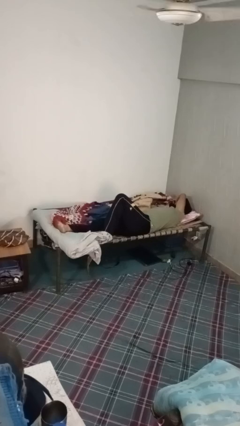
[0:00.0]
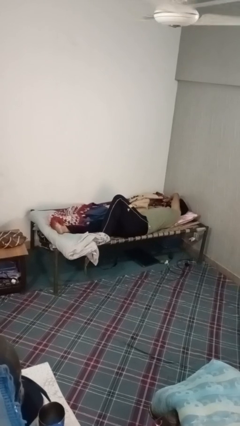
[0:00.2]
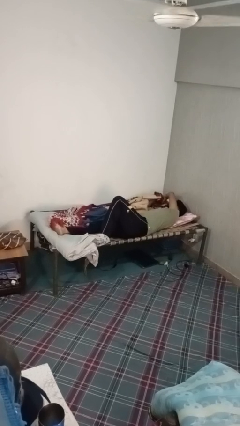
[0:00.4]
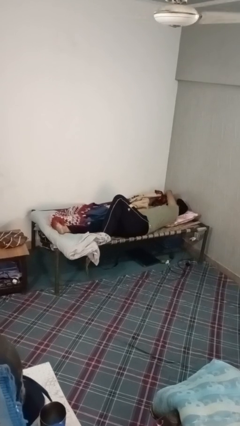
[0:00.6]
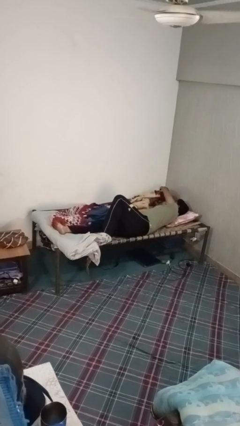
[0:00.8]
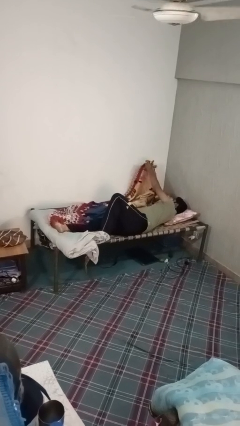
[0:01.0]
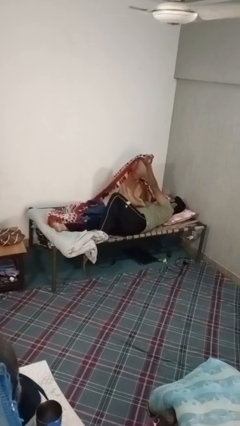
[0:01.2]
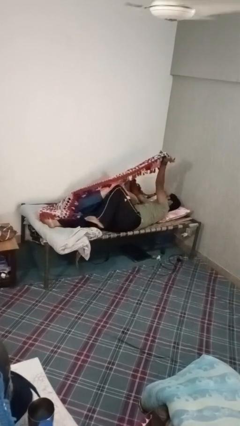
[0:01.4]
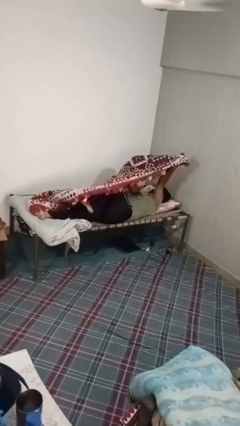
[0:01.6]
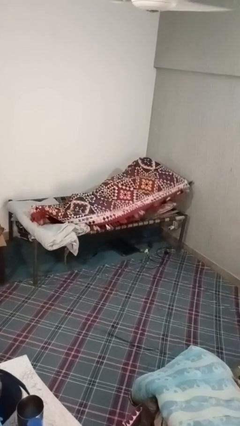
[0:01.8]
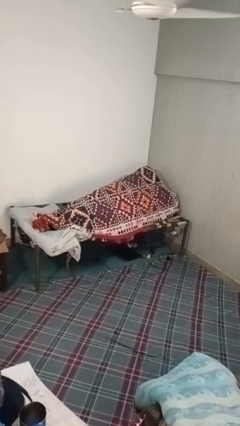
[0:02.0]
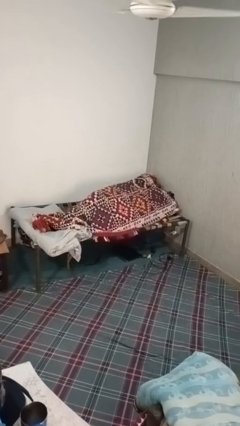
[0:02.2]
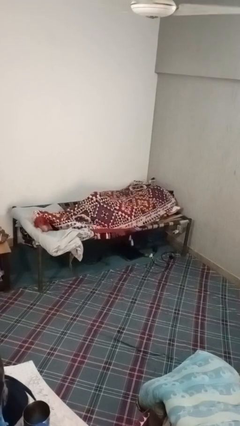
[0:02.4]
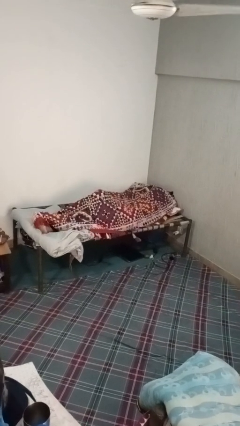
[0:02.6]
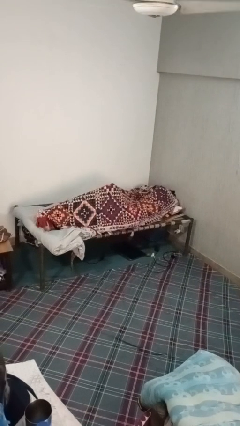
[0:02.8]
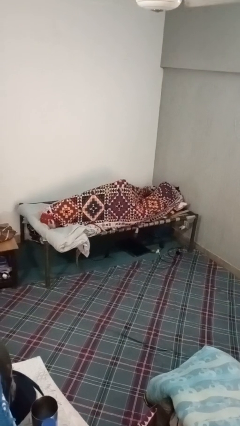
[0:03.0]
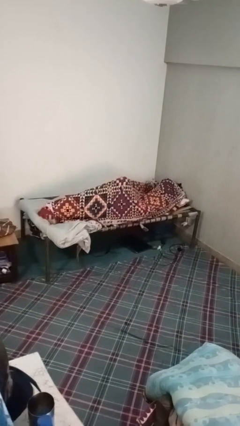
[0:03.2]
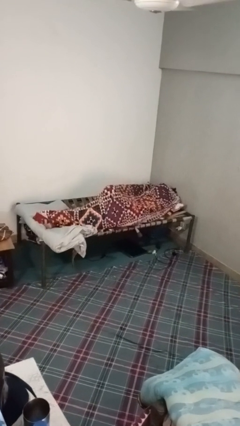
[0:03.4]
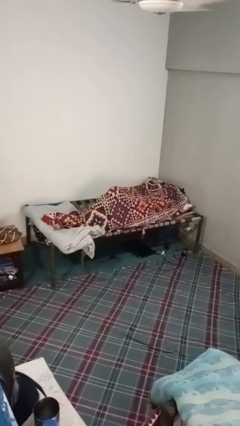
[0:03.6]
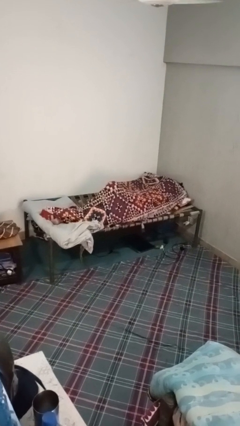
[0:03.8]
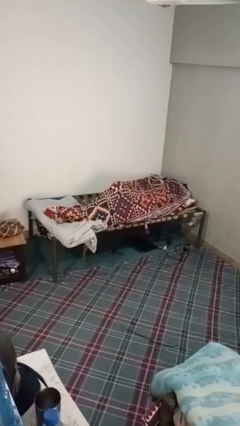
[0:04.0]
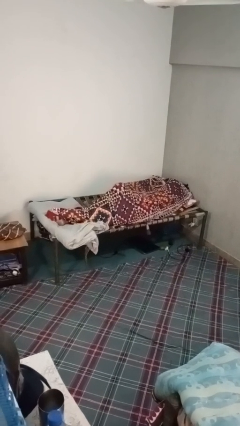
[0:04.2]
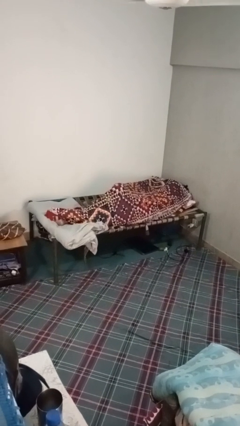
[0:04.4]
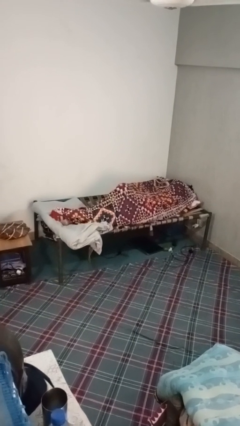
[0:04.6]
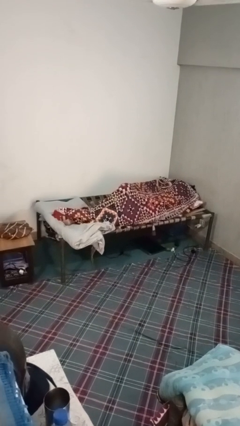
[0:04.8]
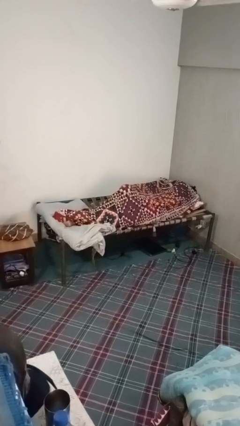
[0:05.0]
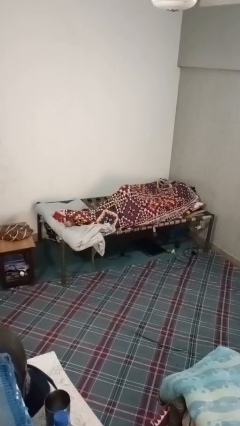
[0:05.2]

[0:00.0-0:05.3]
person covers with blanket

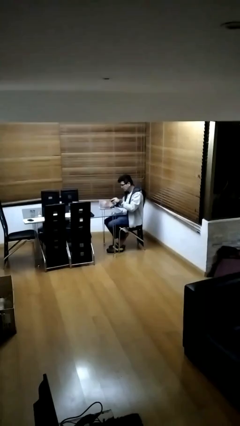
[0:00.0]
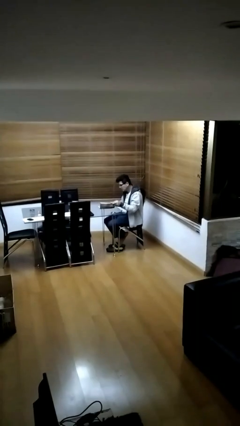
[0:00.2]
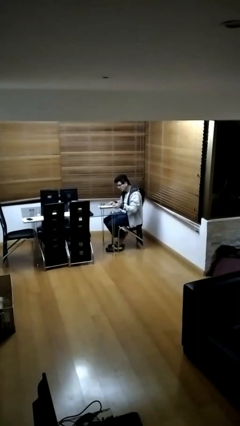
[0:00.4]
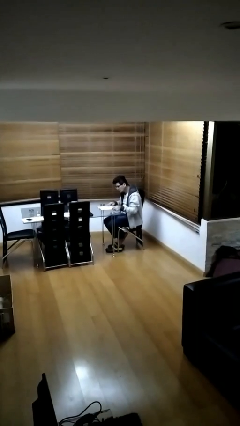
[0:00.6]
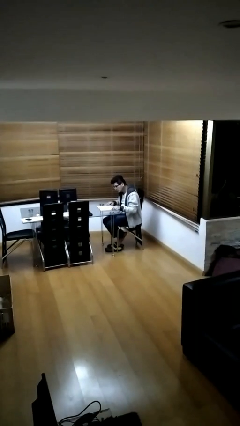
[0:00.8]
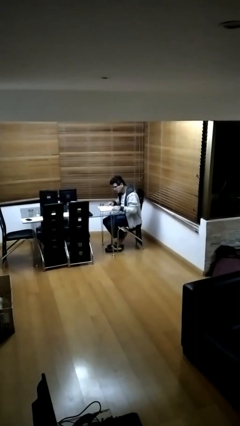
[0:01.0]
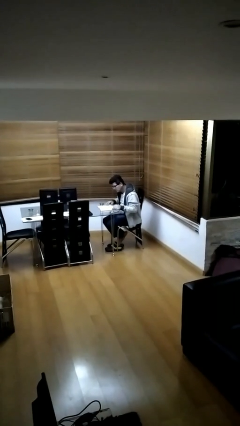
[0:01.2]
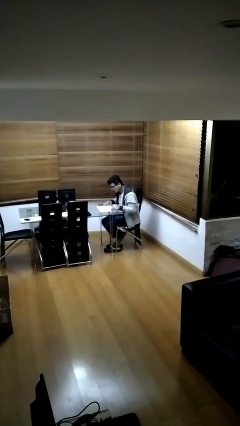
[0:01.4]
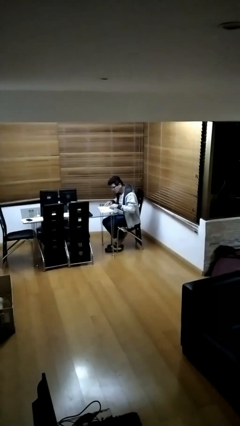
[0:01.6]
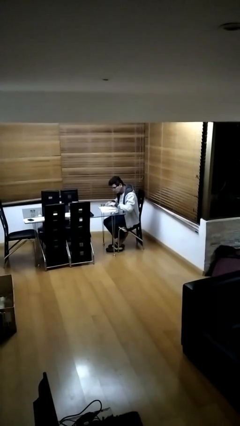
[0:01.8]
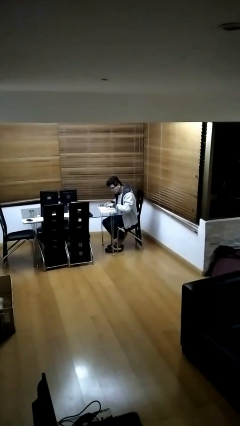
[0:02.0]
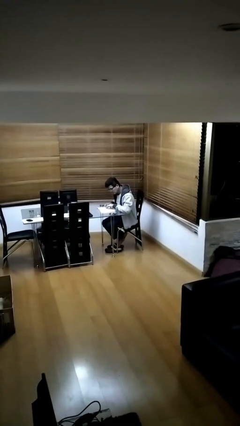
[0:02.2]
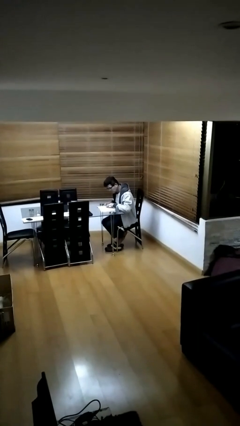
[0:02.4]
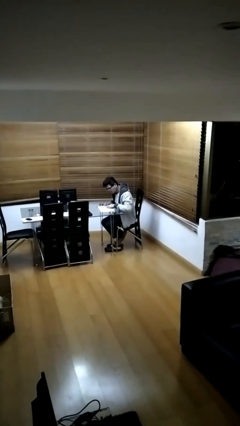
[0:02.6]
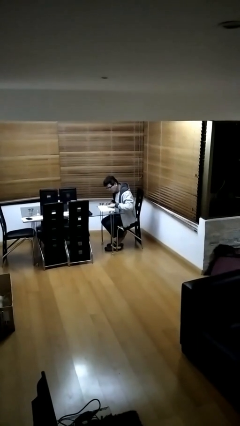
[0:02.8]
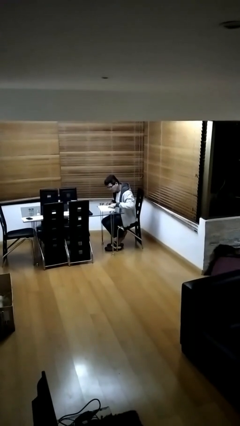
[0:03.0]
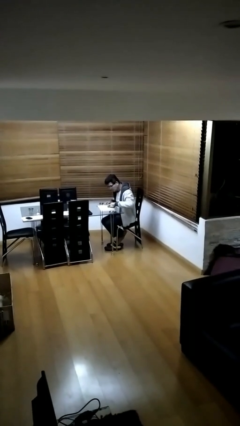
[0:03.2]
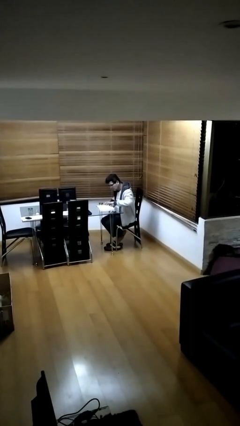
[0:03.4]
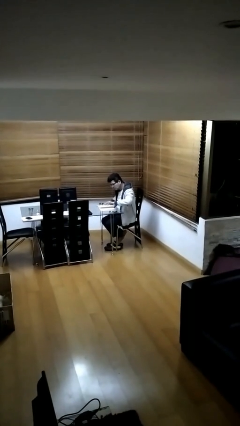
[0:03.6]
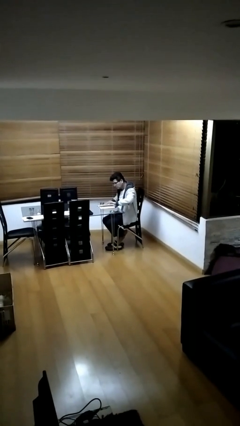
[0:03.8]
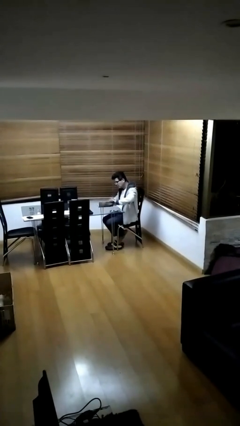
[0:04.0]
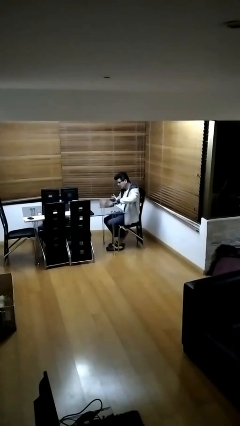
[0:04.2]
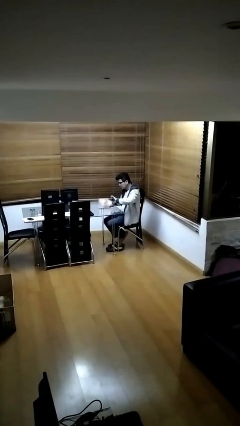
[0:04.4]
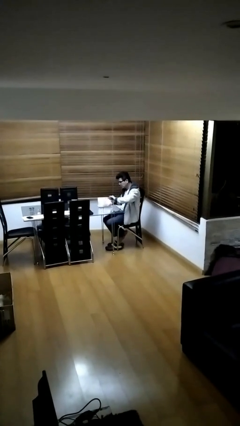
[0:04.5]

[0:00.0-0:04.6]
person reads document

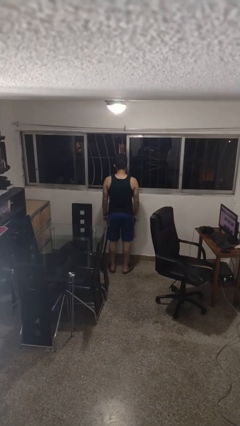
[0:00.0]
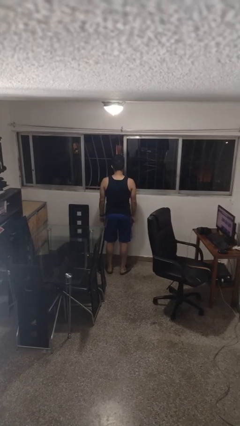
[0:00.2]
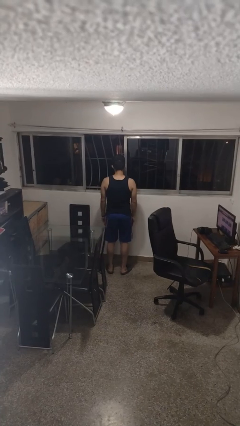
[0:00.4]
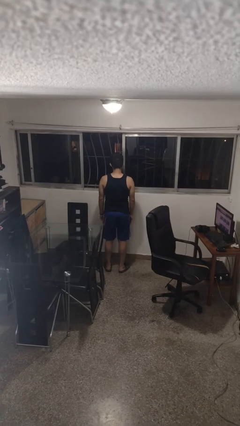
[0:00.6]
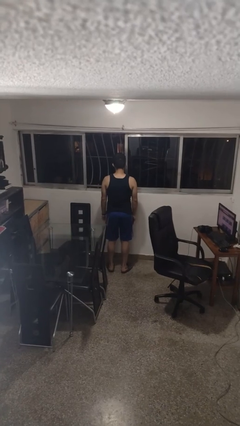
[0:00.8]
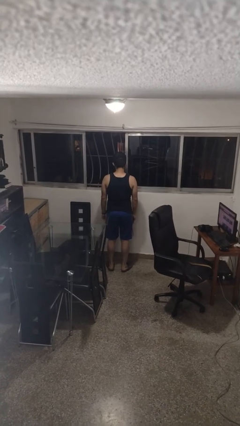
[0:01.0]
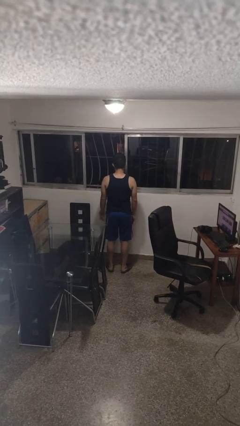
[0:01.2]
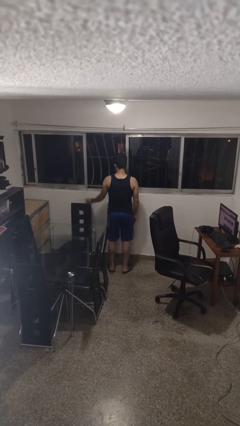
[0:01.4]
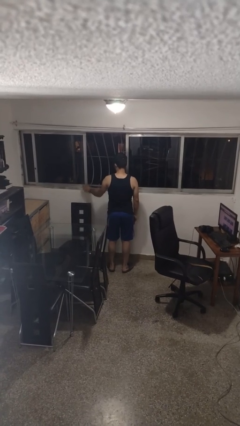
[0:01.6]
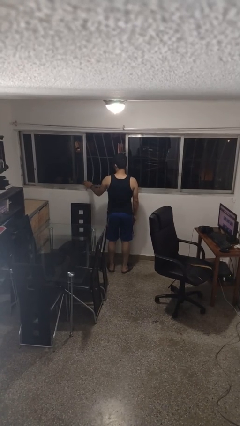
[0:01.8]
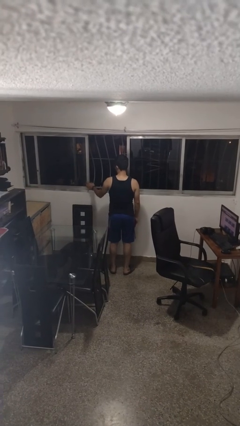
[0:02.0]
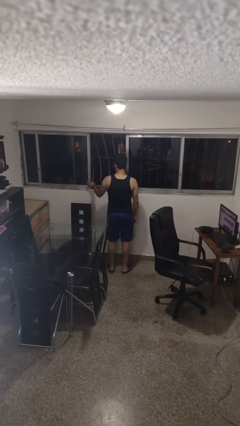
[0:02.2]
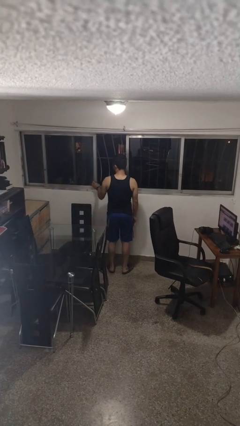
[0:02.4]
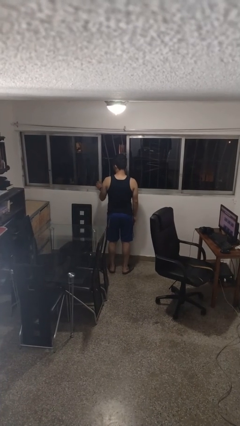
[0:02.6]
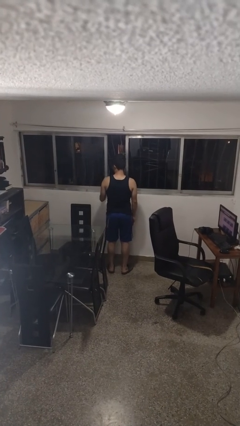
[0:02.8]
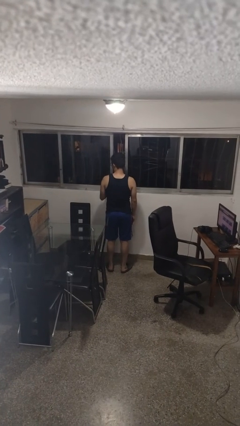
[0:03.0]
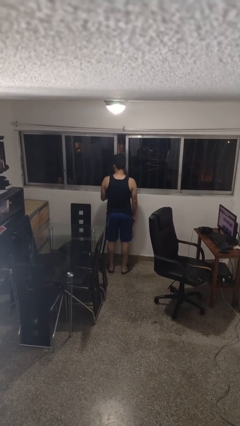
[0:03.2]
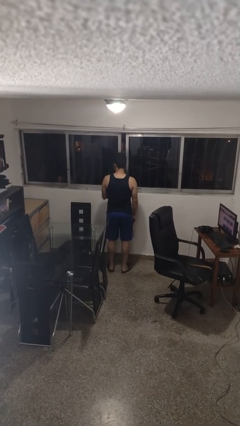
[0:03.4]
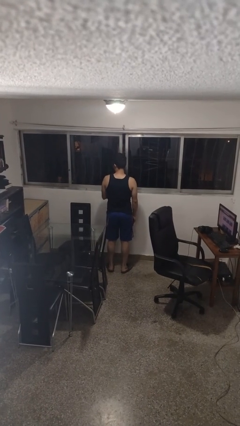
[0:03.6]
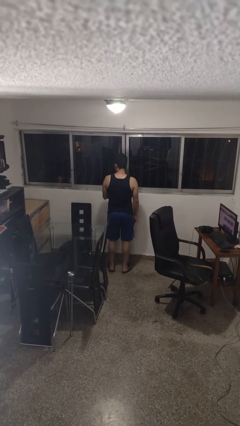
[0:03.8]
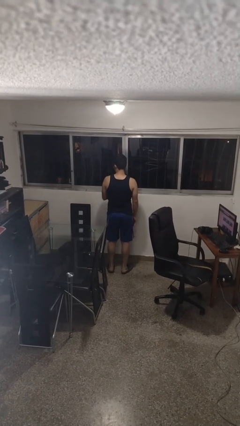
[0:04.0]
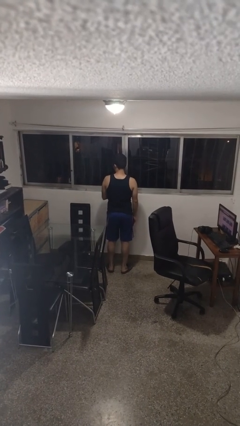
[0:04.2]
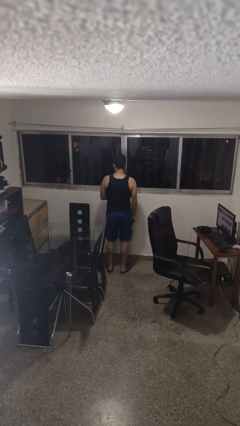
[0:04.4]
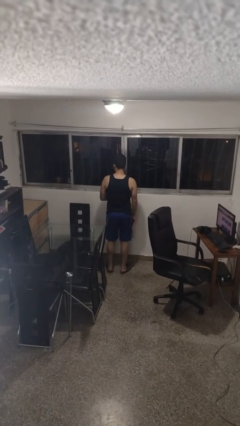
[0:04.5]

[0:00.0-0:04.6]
person closes home window

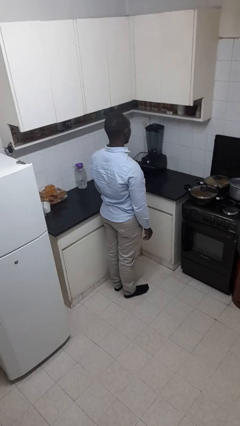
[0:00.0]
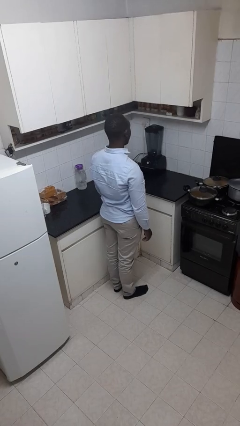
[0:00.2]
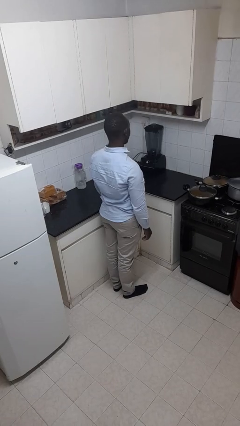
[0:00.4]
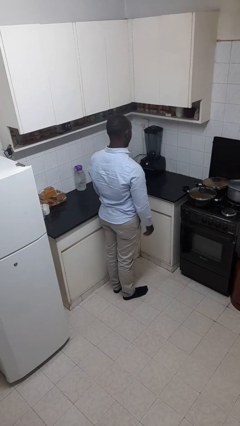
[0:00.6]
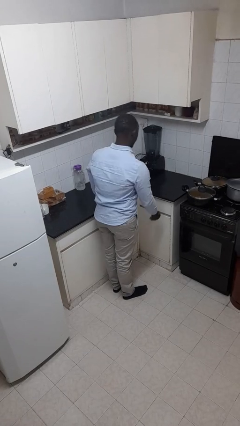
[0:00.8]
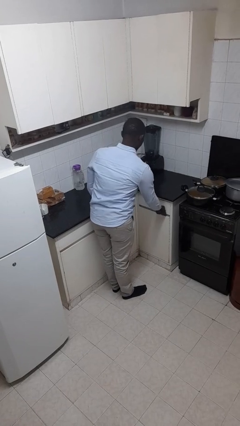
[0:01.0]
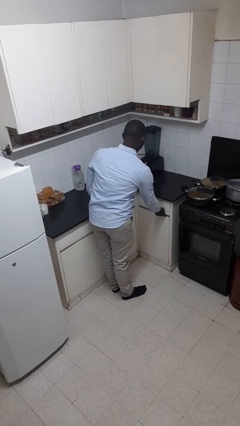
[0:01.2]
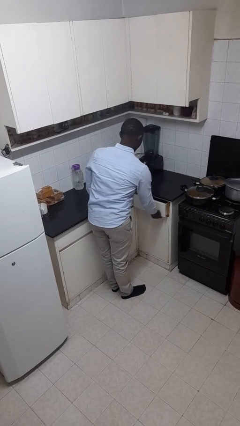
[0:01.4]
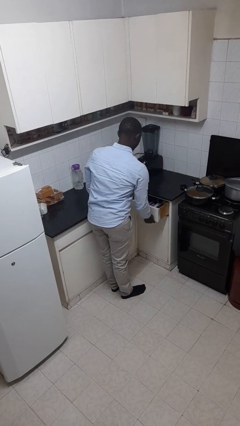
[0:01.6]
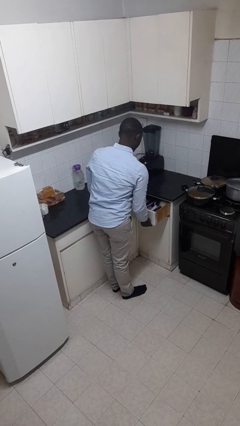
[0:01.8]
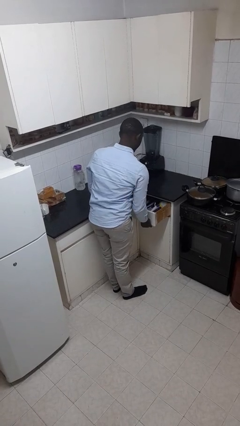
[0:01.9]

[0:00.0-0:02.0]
person opens kitchen drawer

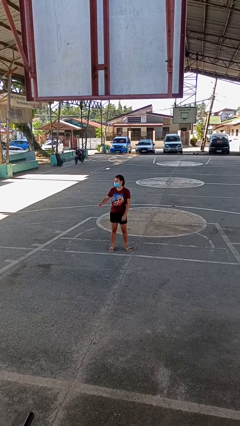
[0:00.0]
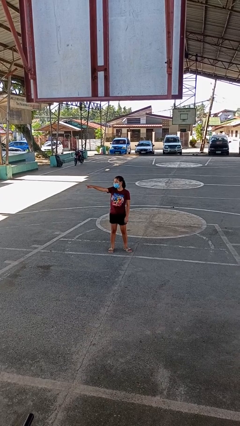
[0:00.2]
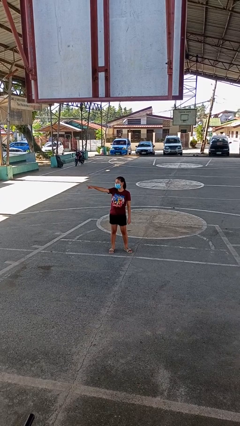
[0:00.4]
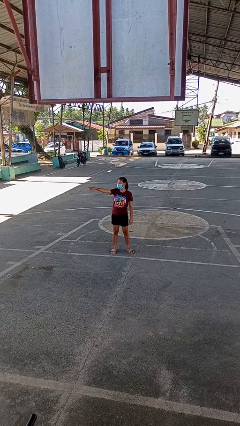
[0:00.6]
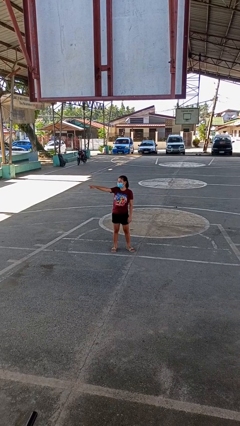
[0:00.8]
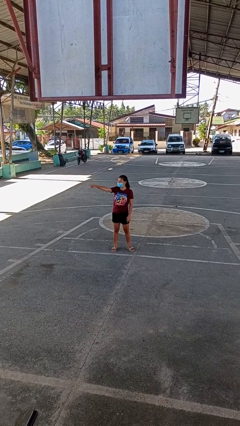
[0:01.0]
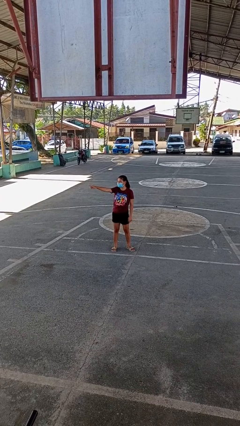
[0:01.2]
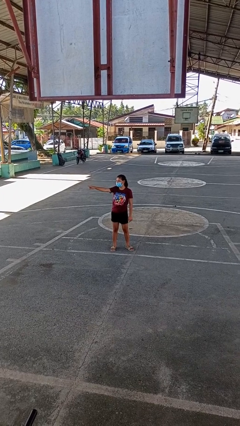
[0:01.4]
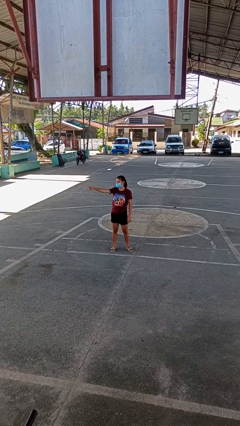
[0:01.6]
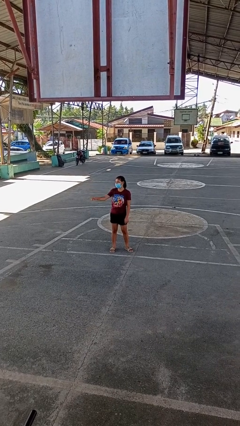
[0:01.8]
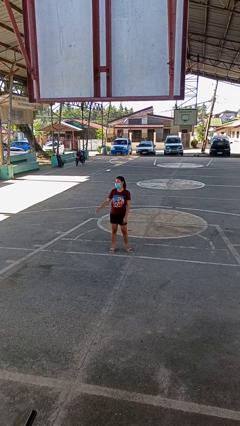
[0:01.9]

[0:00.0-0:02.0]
person points at person
